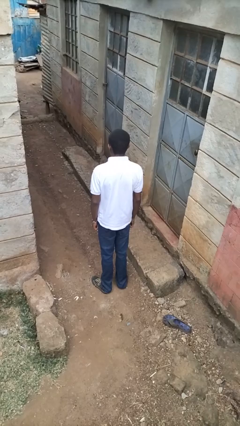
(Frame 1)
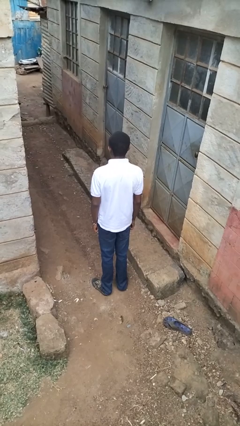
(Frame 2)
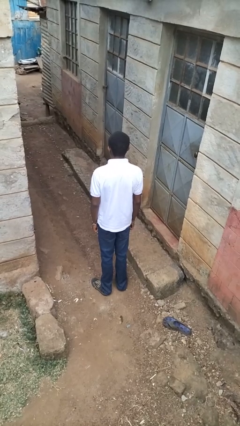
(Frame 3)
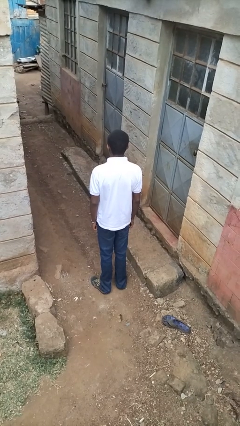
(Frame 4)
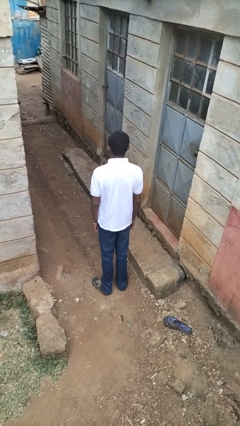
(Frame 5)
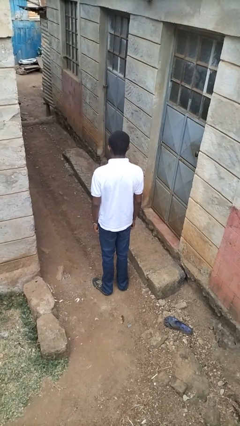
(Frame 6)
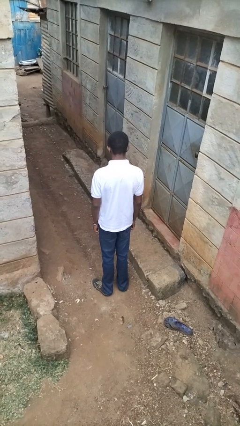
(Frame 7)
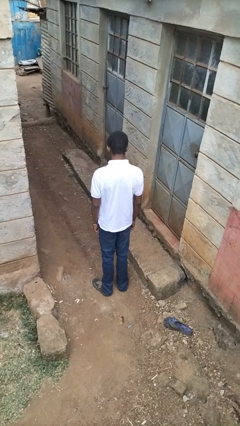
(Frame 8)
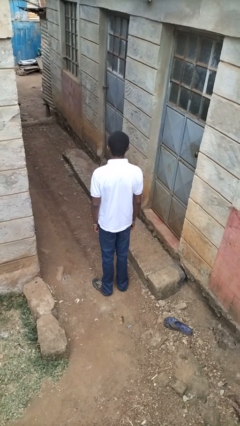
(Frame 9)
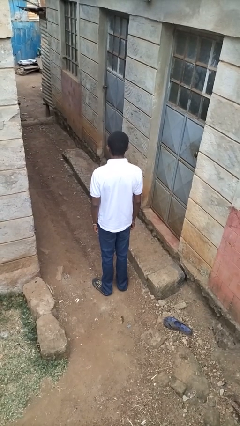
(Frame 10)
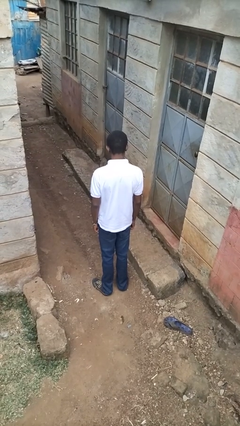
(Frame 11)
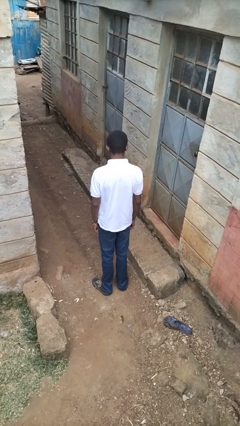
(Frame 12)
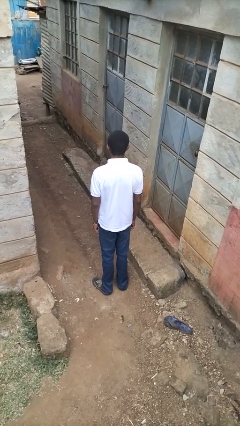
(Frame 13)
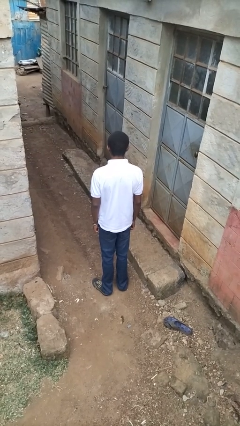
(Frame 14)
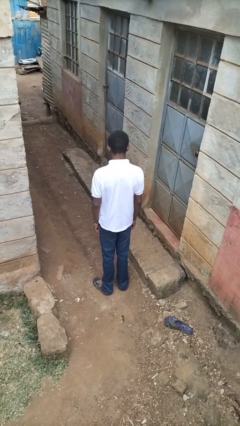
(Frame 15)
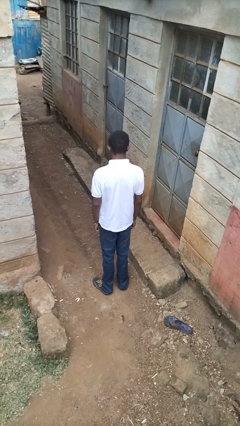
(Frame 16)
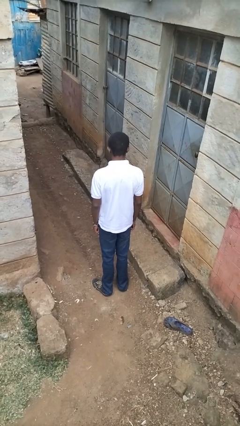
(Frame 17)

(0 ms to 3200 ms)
person nods head

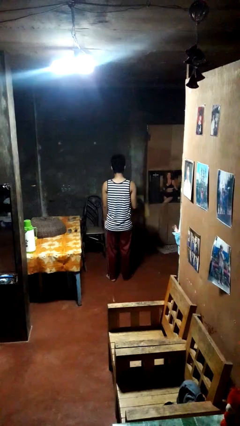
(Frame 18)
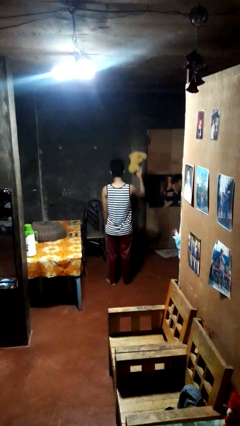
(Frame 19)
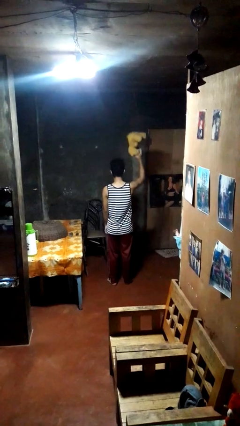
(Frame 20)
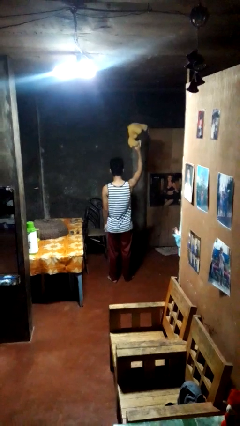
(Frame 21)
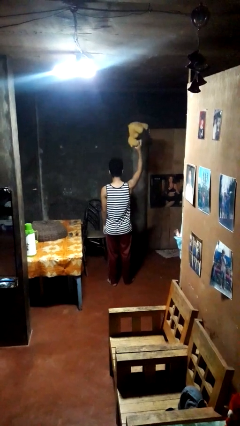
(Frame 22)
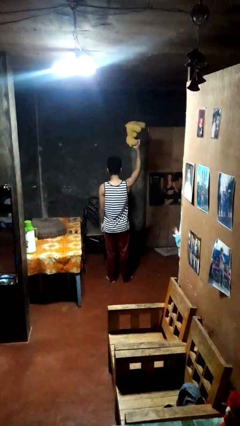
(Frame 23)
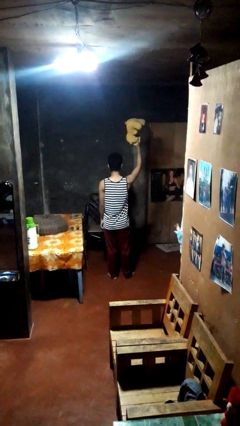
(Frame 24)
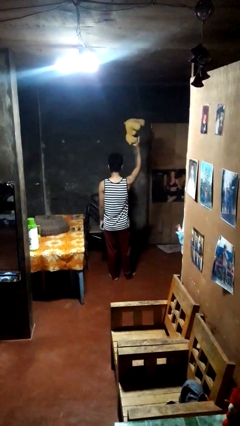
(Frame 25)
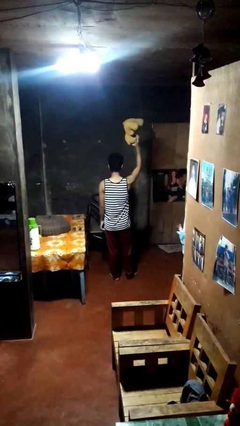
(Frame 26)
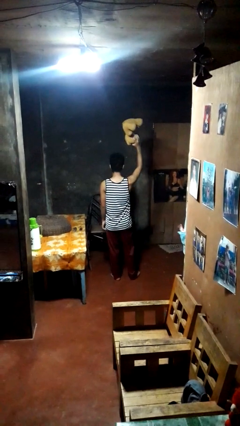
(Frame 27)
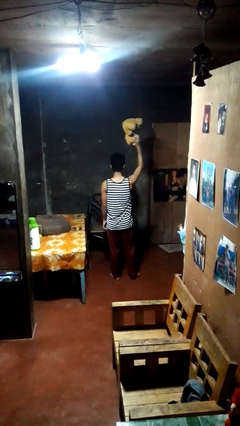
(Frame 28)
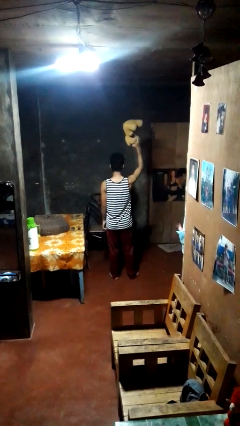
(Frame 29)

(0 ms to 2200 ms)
person holds object above head

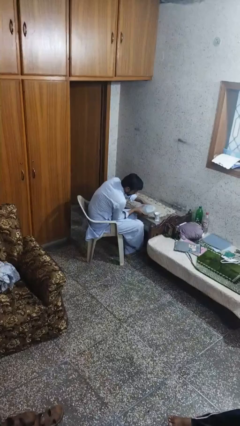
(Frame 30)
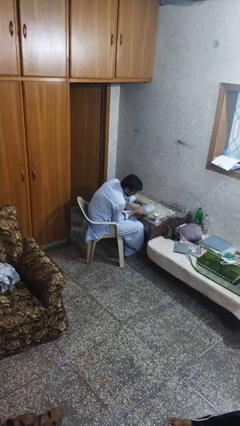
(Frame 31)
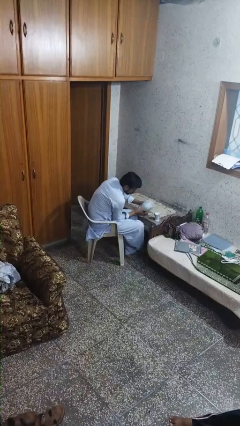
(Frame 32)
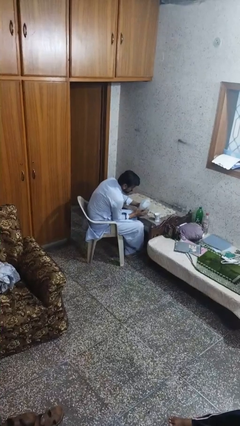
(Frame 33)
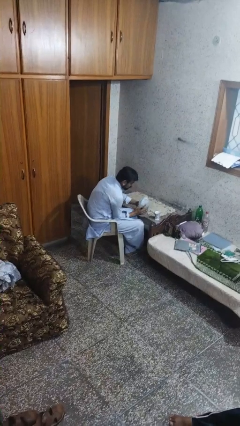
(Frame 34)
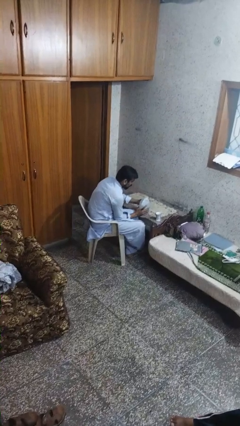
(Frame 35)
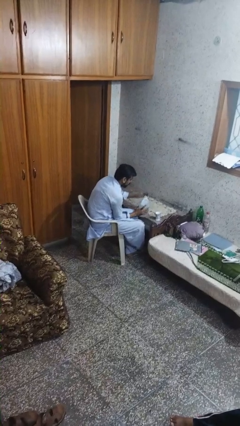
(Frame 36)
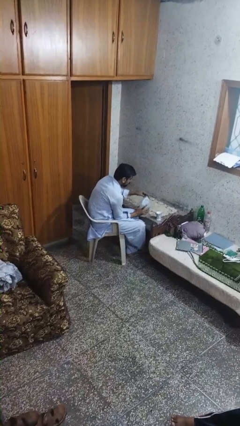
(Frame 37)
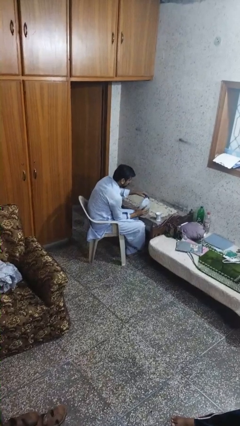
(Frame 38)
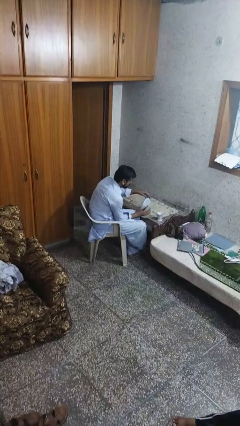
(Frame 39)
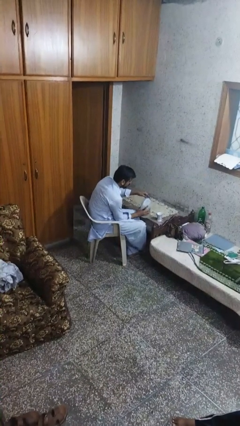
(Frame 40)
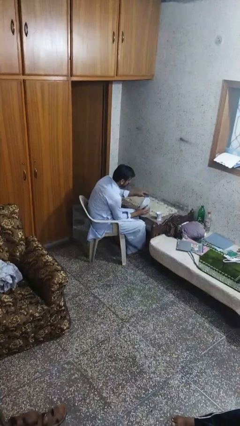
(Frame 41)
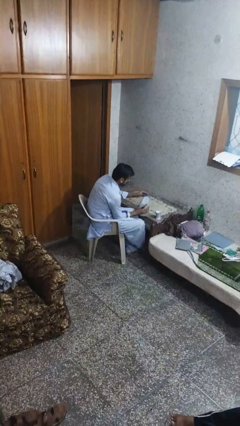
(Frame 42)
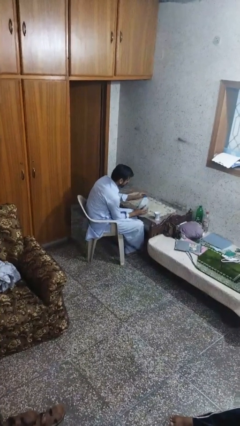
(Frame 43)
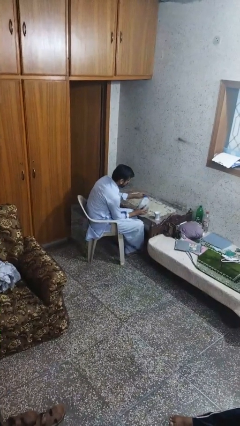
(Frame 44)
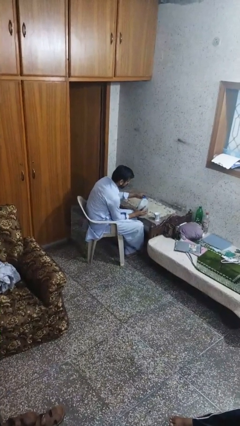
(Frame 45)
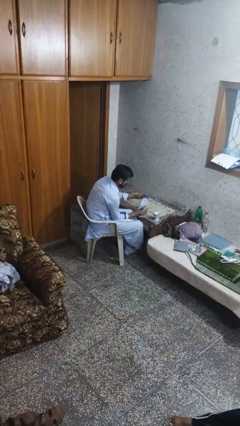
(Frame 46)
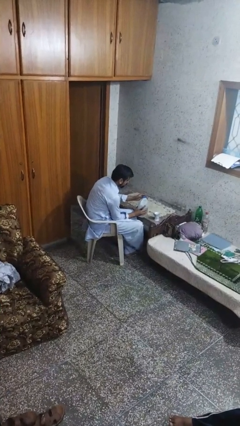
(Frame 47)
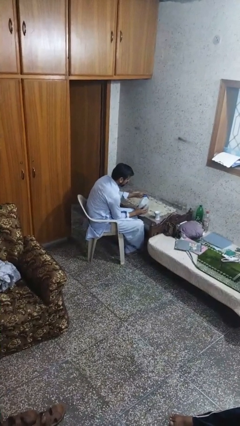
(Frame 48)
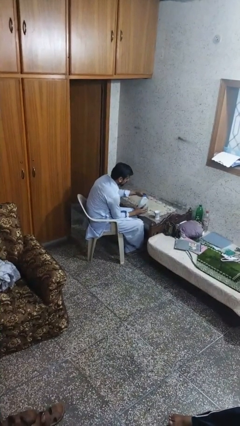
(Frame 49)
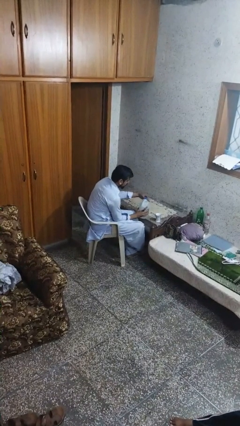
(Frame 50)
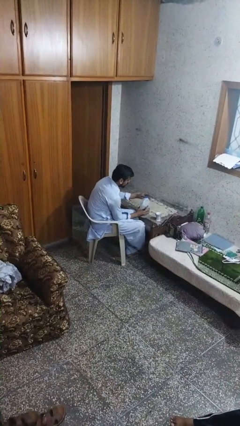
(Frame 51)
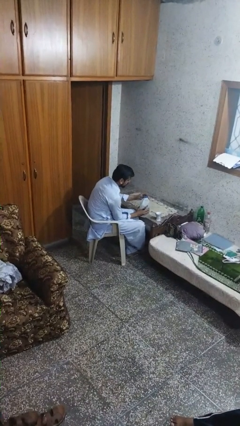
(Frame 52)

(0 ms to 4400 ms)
person screws lid to bottle

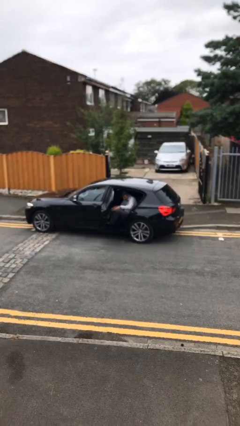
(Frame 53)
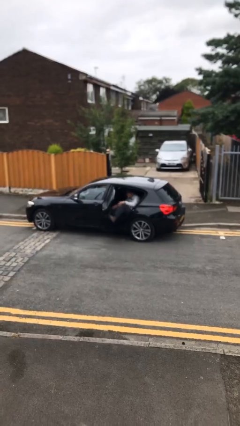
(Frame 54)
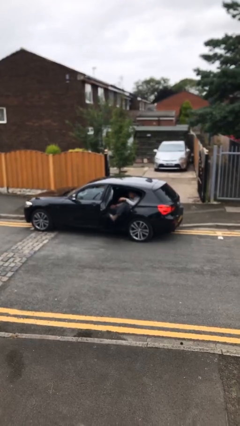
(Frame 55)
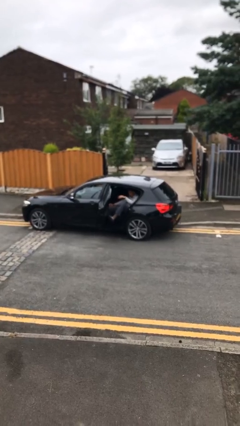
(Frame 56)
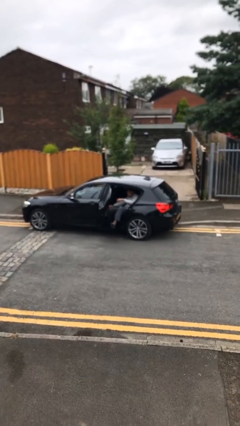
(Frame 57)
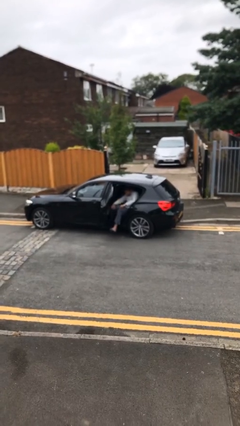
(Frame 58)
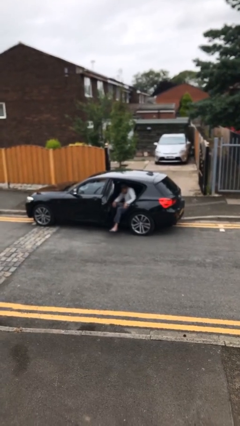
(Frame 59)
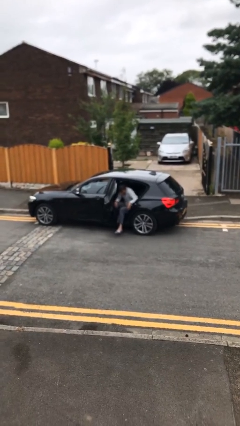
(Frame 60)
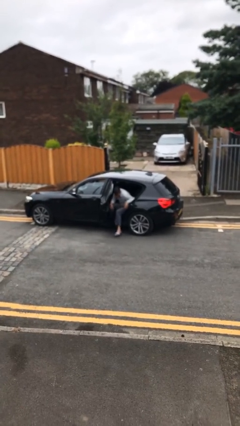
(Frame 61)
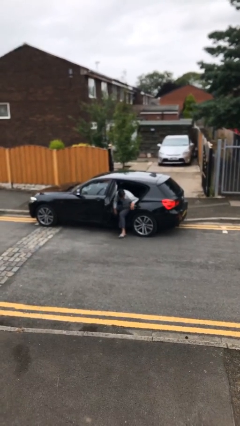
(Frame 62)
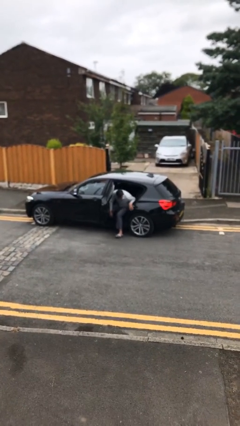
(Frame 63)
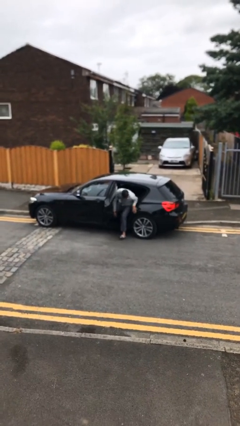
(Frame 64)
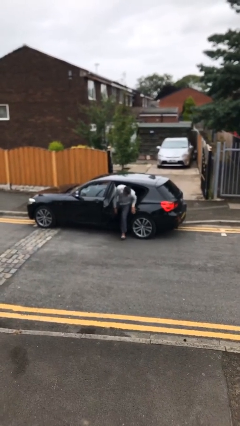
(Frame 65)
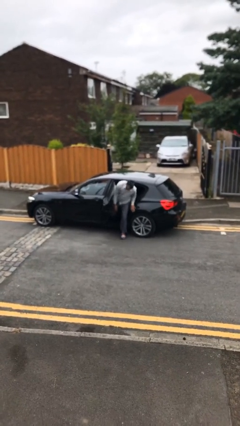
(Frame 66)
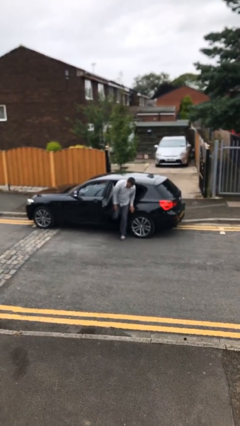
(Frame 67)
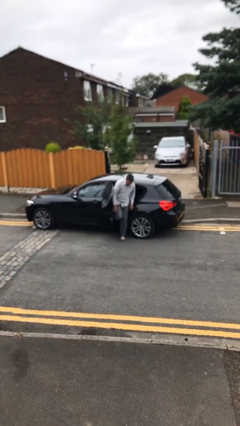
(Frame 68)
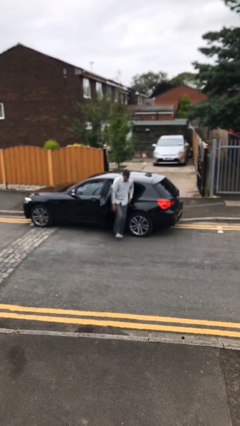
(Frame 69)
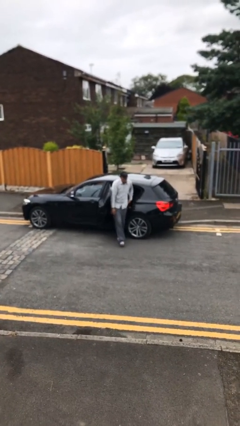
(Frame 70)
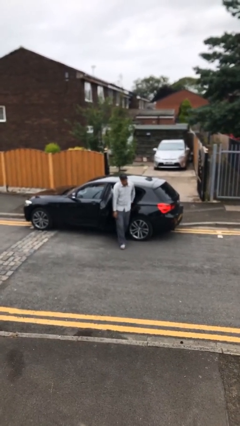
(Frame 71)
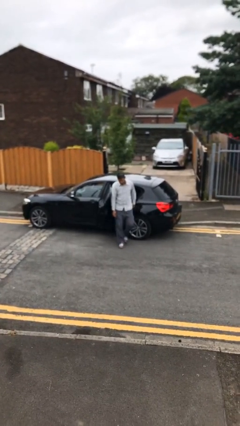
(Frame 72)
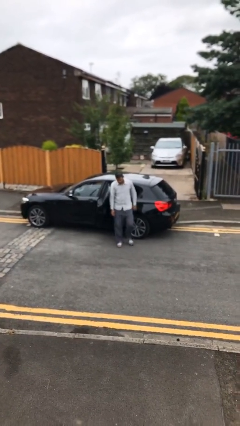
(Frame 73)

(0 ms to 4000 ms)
person exits car

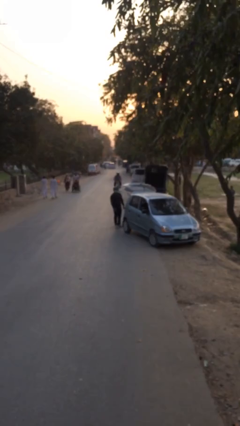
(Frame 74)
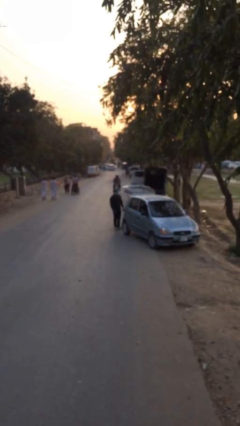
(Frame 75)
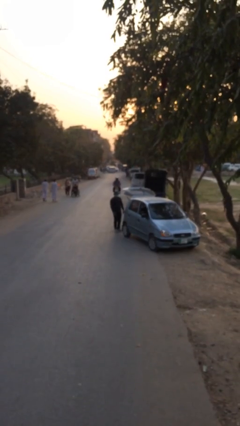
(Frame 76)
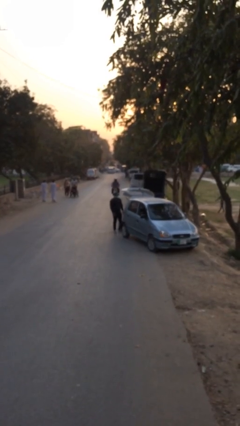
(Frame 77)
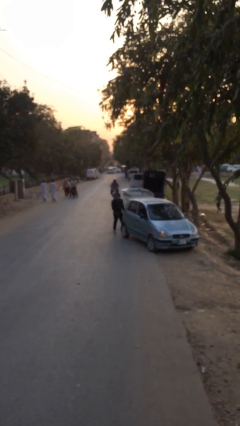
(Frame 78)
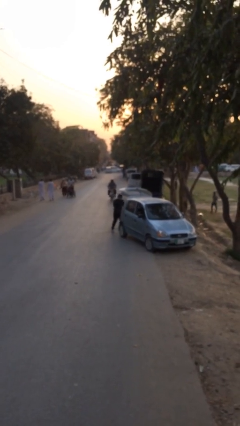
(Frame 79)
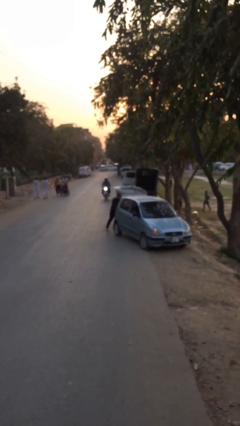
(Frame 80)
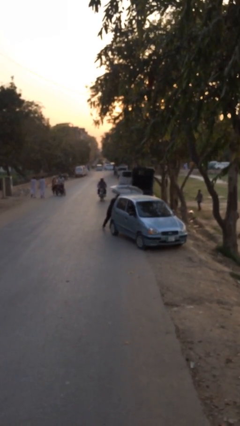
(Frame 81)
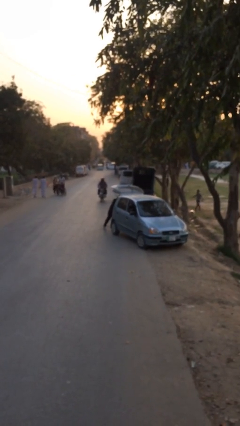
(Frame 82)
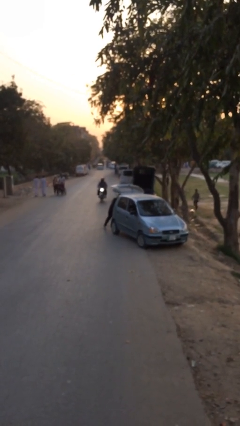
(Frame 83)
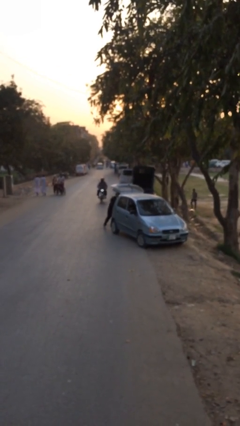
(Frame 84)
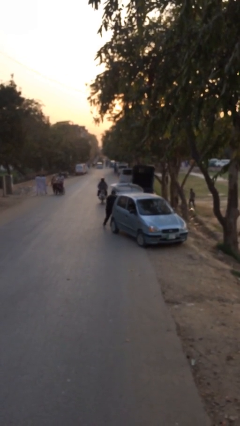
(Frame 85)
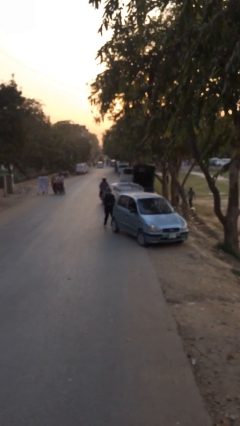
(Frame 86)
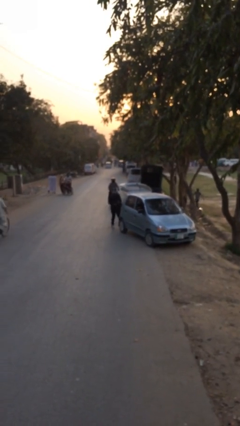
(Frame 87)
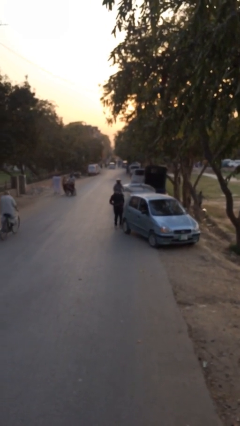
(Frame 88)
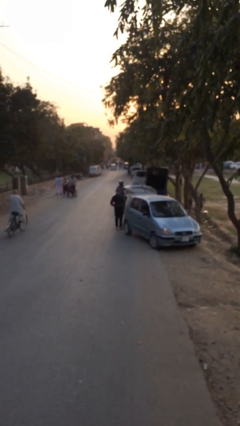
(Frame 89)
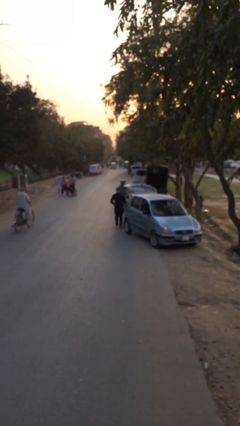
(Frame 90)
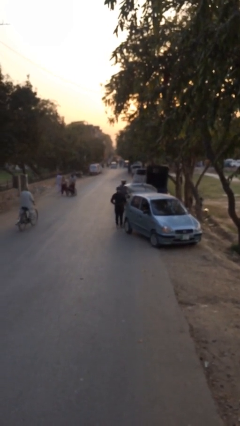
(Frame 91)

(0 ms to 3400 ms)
person unloads car

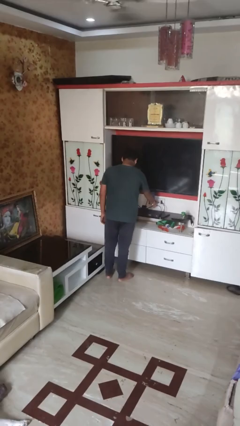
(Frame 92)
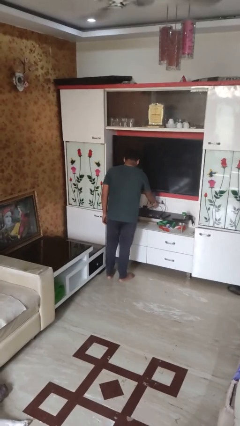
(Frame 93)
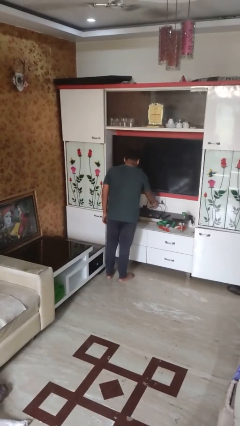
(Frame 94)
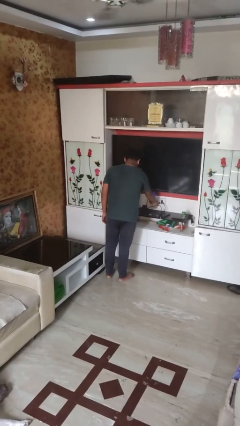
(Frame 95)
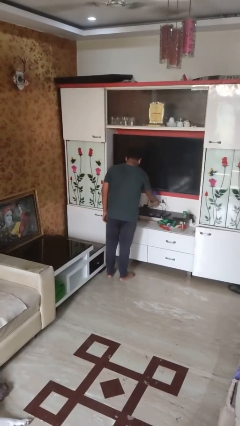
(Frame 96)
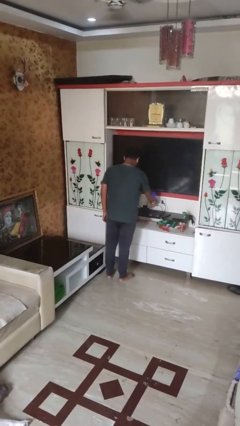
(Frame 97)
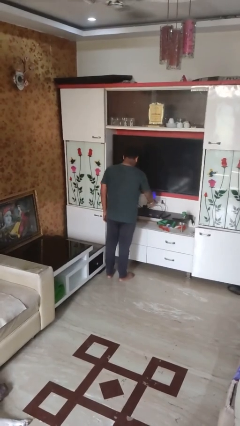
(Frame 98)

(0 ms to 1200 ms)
person turns on lamp
